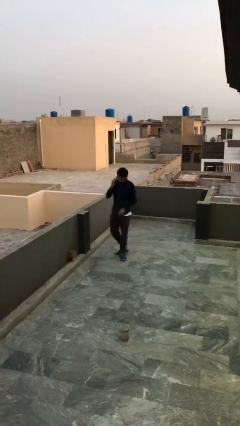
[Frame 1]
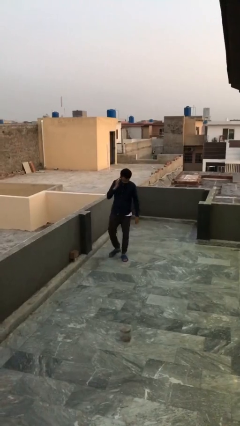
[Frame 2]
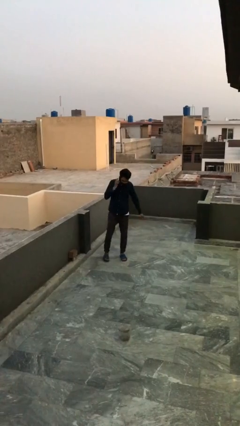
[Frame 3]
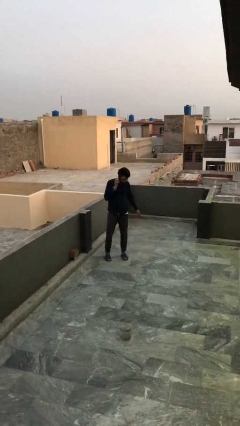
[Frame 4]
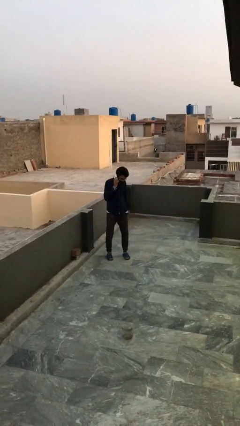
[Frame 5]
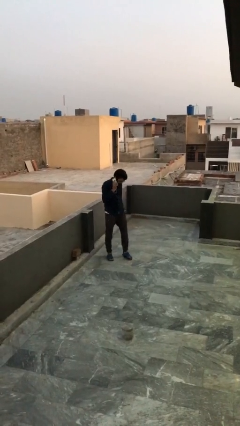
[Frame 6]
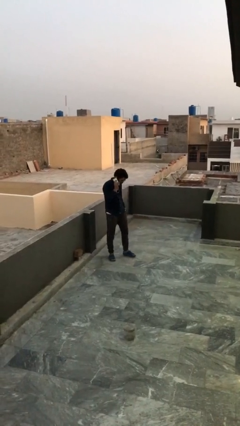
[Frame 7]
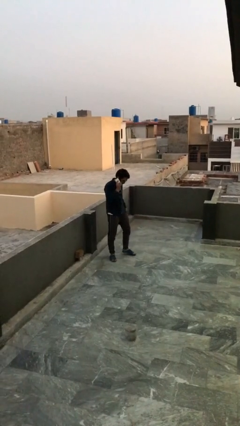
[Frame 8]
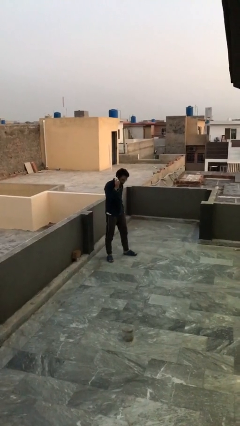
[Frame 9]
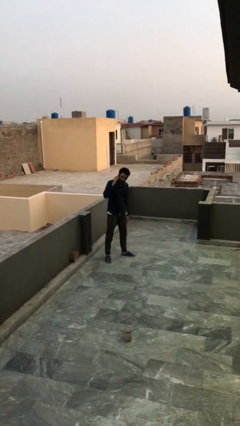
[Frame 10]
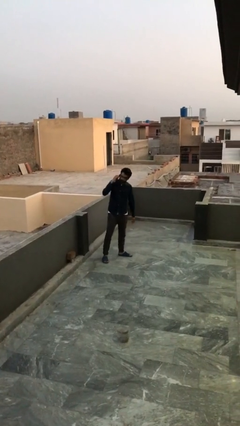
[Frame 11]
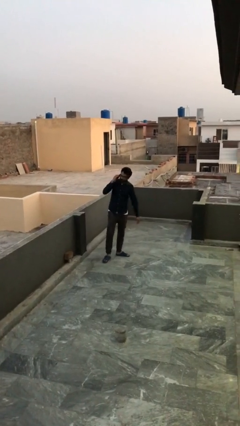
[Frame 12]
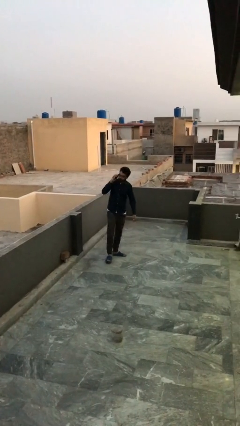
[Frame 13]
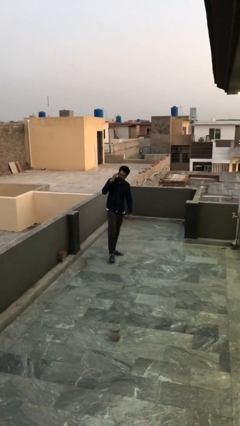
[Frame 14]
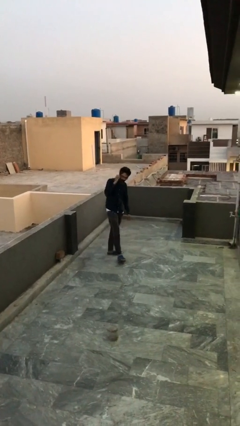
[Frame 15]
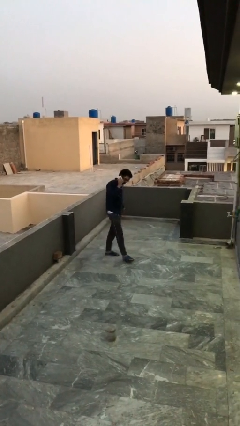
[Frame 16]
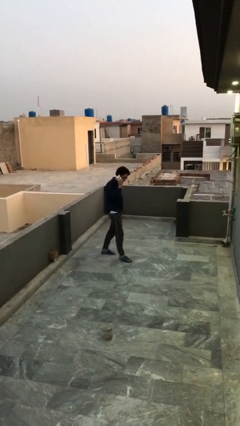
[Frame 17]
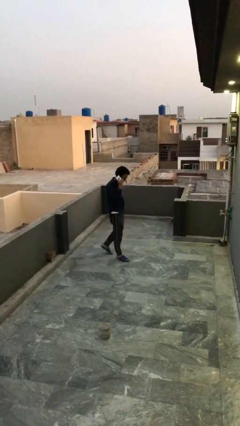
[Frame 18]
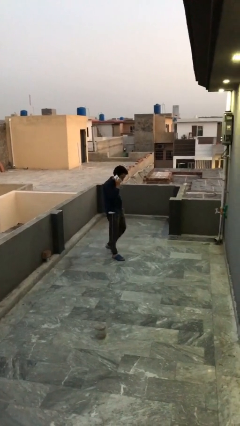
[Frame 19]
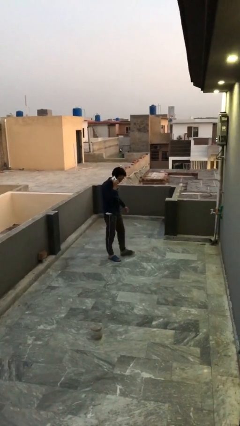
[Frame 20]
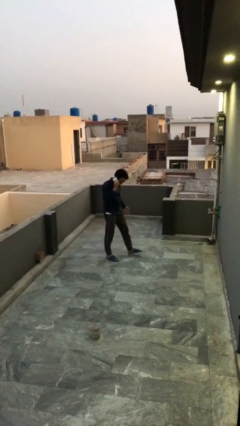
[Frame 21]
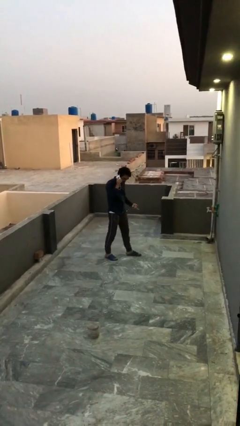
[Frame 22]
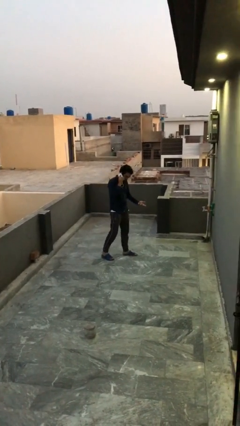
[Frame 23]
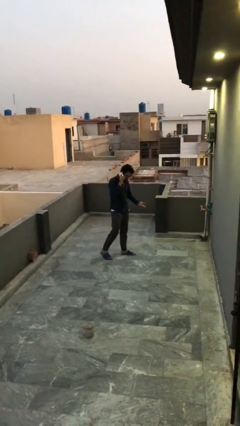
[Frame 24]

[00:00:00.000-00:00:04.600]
person talks on phone

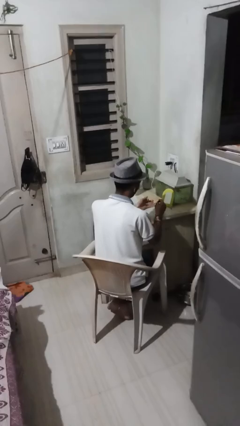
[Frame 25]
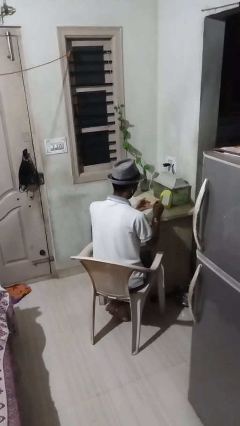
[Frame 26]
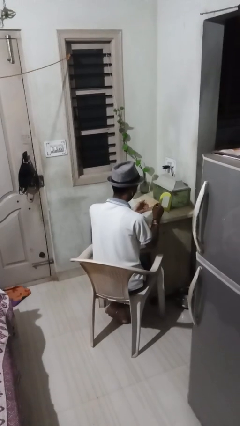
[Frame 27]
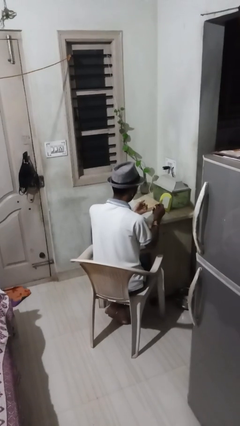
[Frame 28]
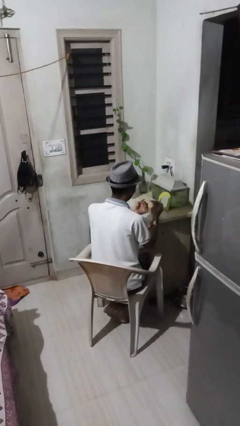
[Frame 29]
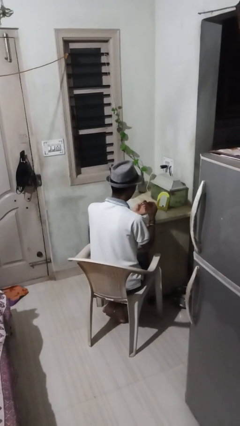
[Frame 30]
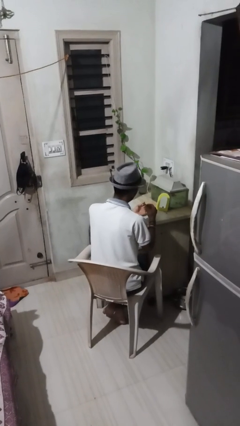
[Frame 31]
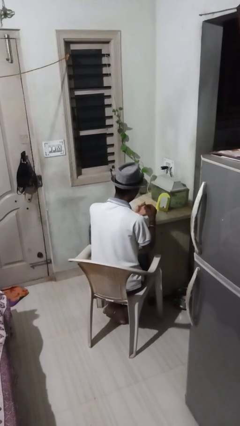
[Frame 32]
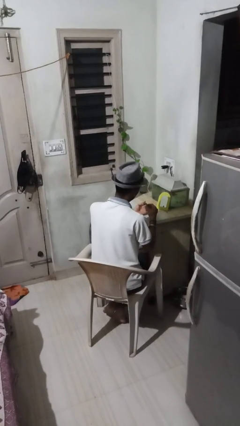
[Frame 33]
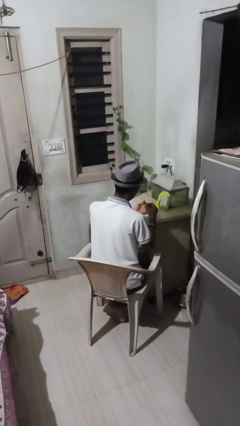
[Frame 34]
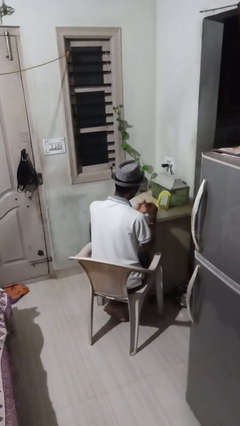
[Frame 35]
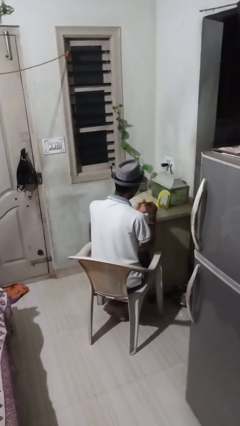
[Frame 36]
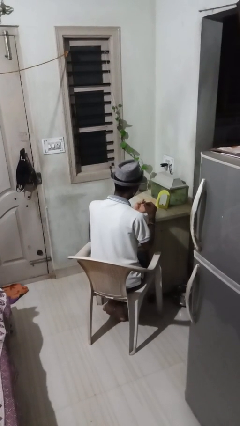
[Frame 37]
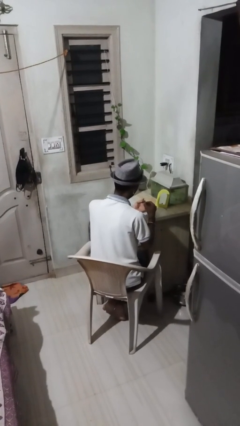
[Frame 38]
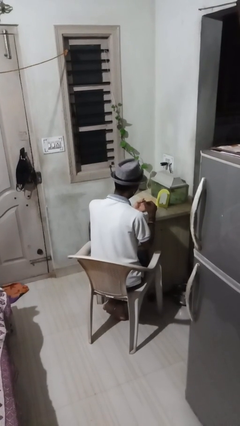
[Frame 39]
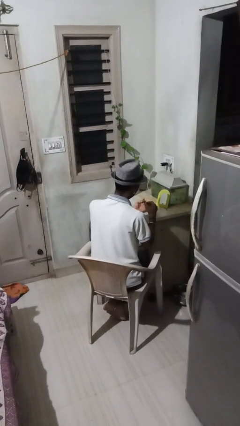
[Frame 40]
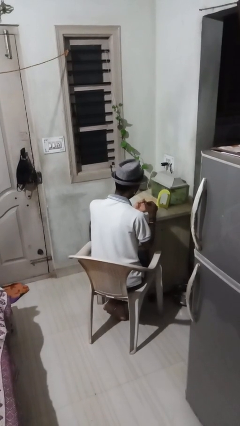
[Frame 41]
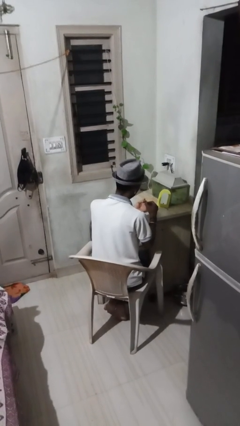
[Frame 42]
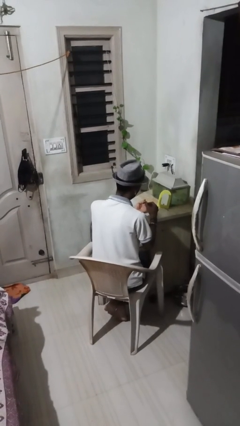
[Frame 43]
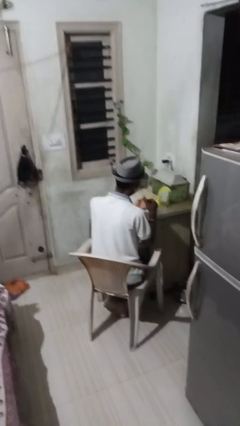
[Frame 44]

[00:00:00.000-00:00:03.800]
person paints fingernails

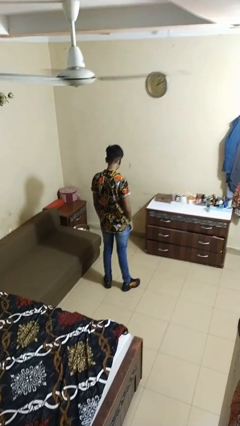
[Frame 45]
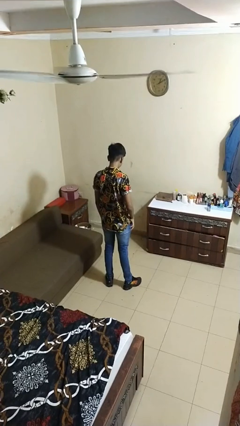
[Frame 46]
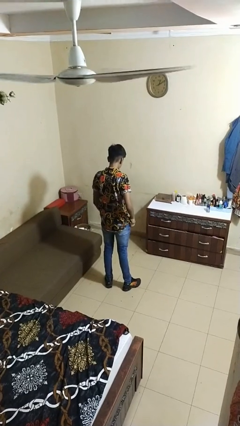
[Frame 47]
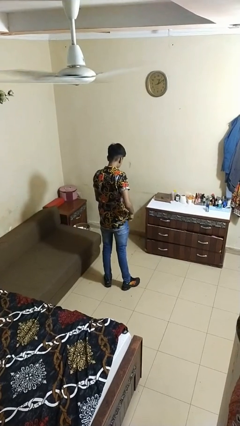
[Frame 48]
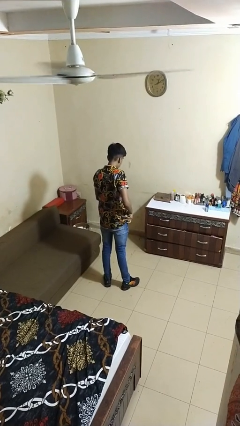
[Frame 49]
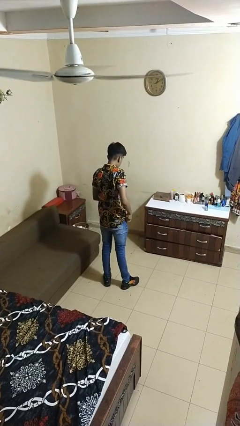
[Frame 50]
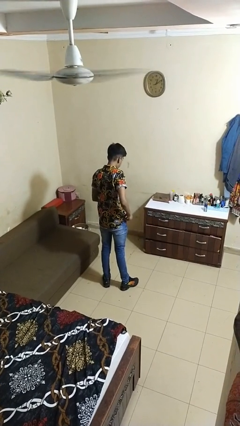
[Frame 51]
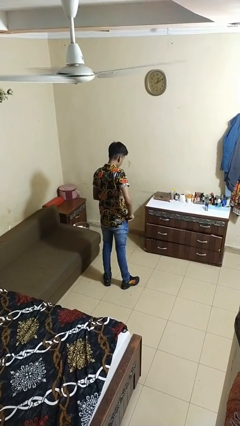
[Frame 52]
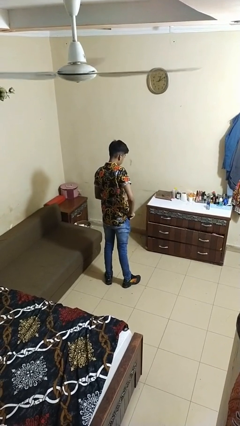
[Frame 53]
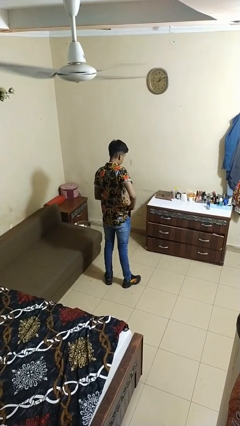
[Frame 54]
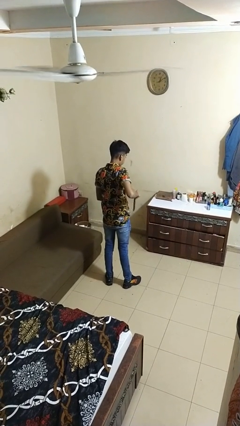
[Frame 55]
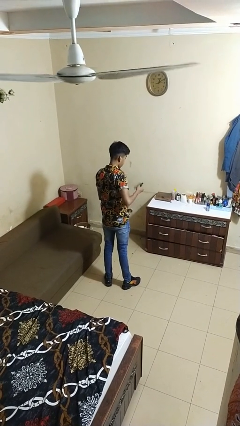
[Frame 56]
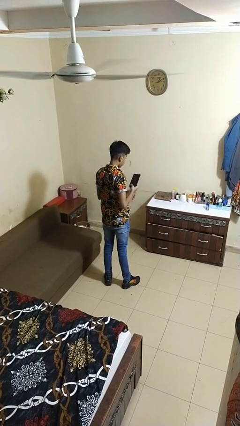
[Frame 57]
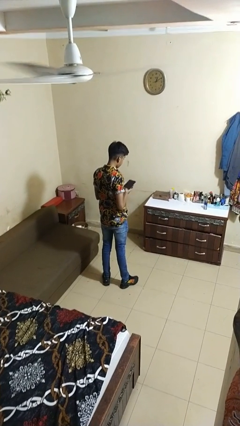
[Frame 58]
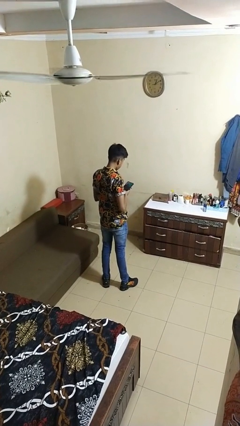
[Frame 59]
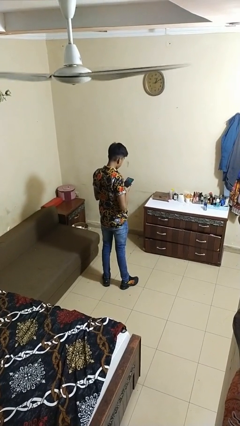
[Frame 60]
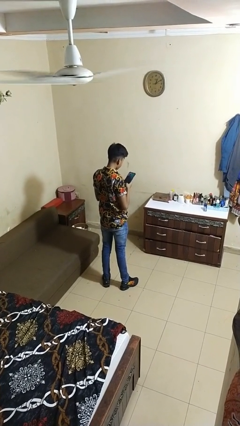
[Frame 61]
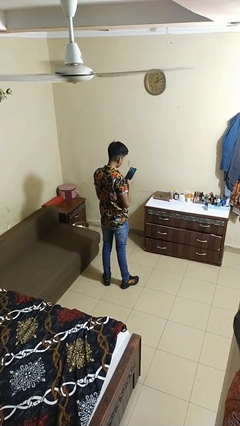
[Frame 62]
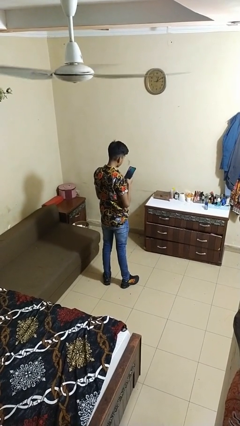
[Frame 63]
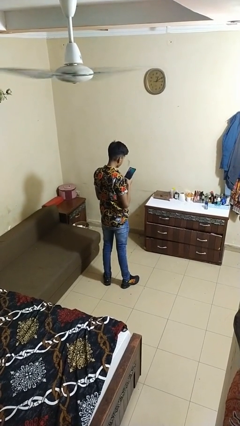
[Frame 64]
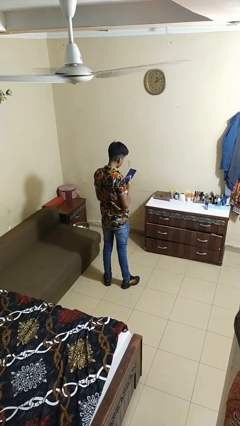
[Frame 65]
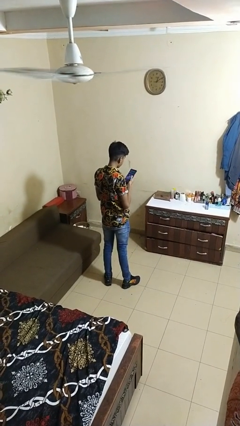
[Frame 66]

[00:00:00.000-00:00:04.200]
person takes phone from pocket

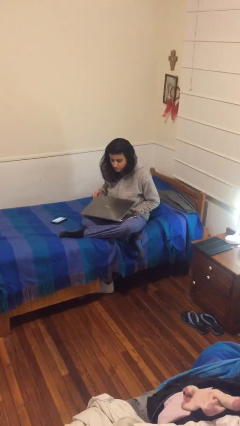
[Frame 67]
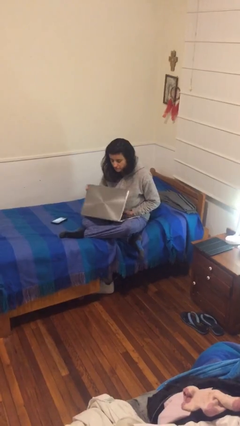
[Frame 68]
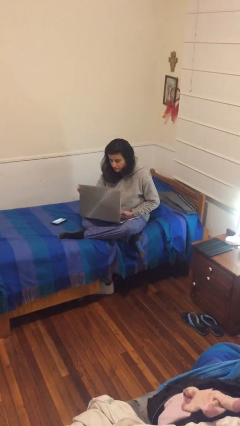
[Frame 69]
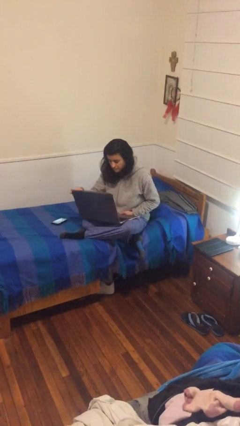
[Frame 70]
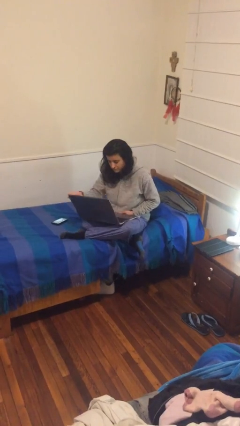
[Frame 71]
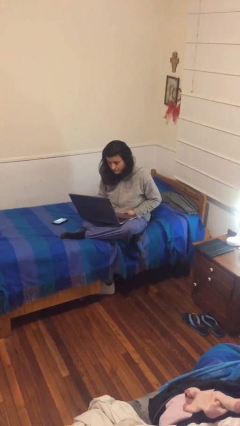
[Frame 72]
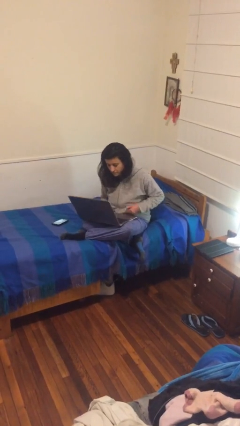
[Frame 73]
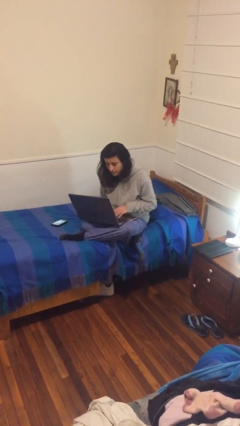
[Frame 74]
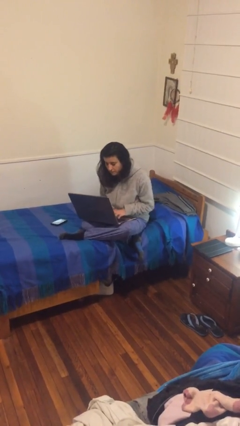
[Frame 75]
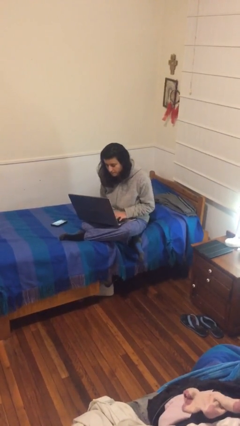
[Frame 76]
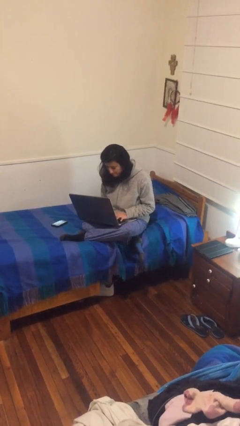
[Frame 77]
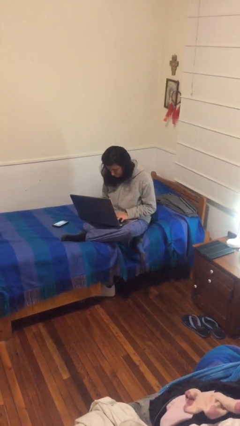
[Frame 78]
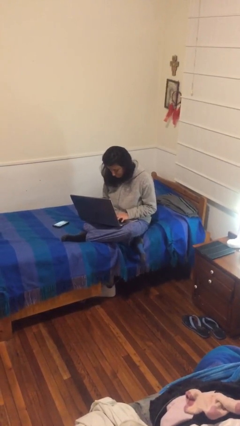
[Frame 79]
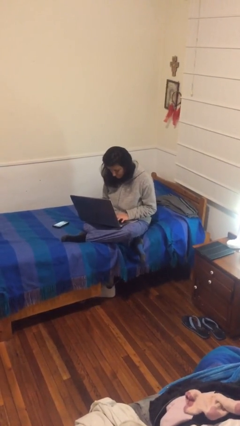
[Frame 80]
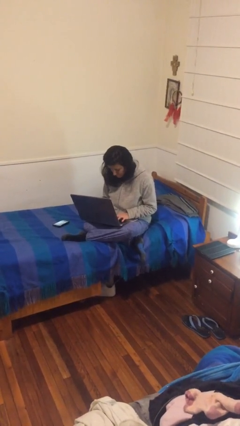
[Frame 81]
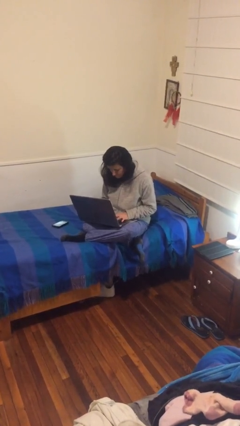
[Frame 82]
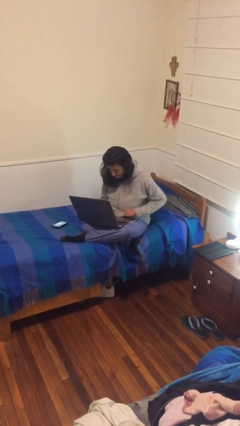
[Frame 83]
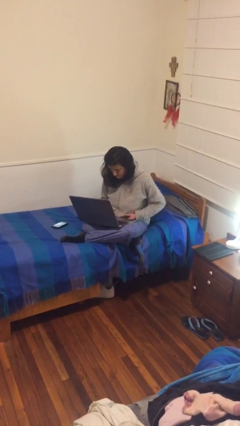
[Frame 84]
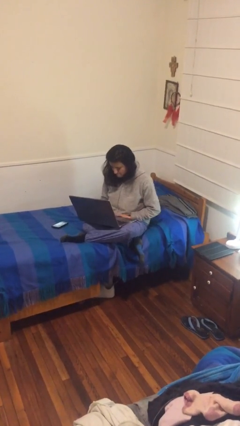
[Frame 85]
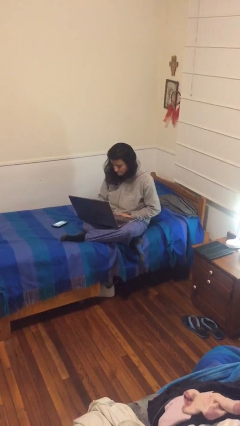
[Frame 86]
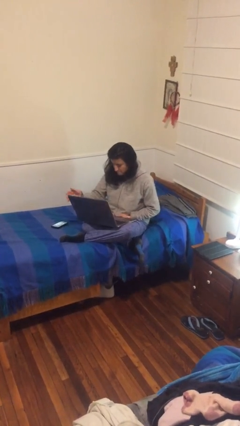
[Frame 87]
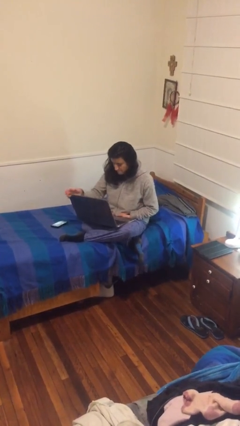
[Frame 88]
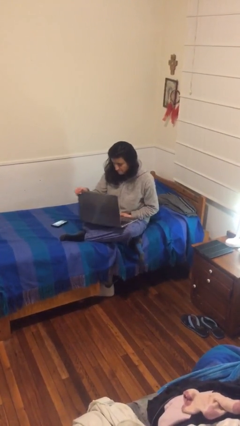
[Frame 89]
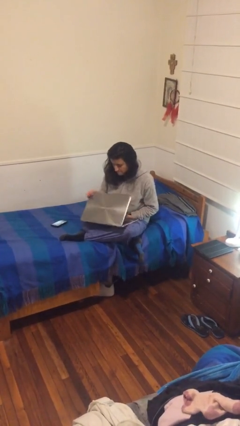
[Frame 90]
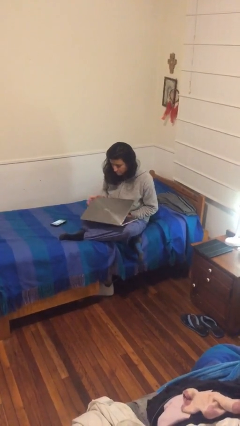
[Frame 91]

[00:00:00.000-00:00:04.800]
person interacts with laptop
